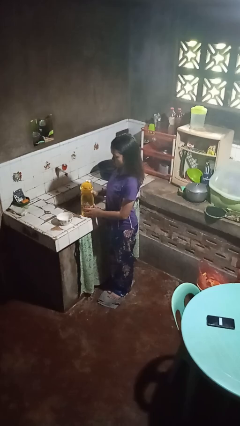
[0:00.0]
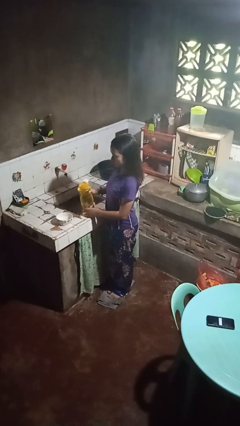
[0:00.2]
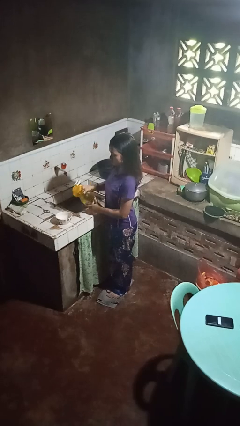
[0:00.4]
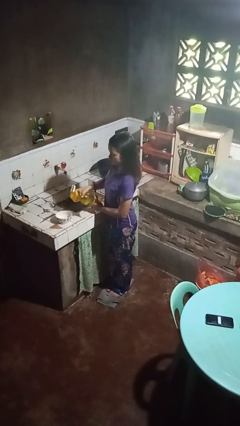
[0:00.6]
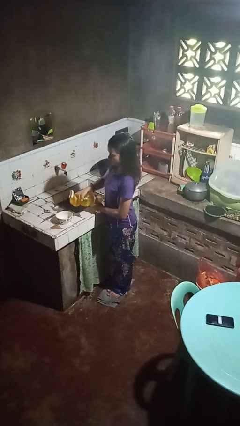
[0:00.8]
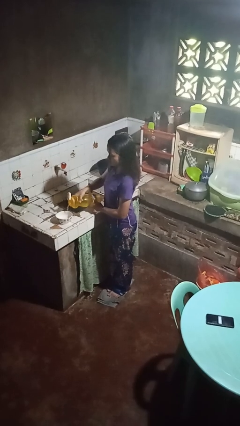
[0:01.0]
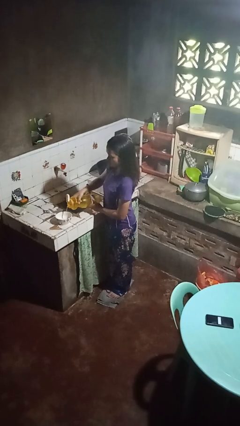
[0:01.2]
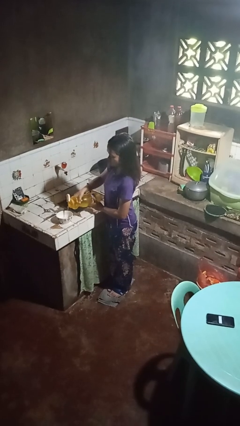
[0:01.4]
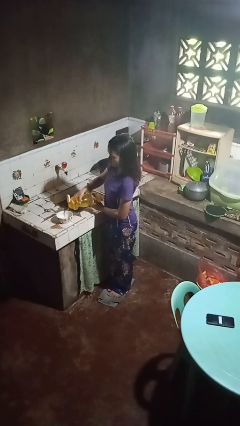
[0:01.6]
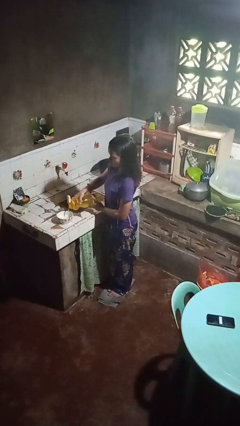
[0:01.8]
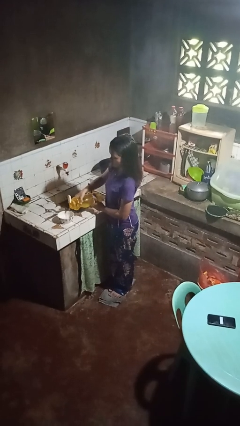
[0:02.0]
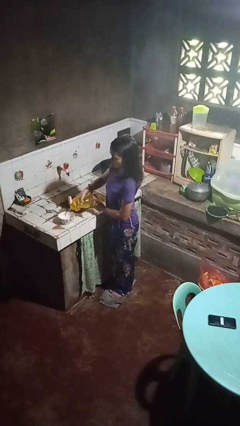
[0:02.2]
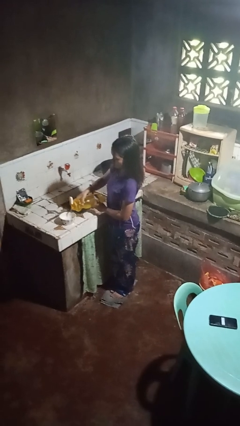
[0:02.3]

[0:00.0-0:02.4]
person pours into bowl

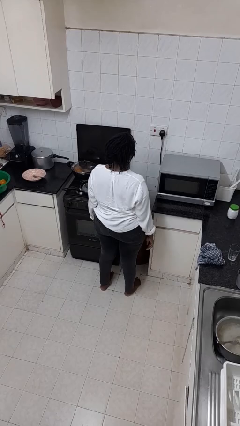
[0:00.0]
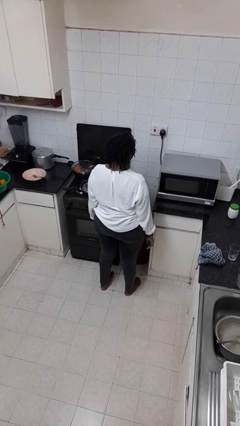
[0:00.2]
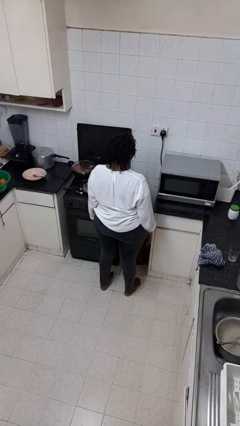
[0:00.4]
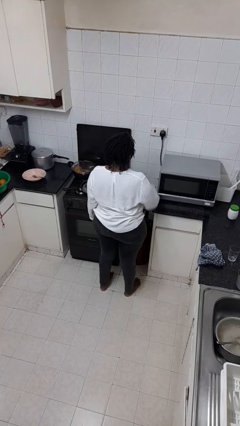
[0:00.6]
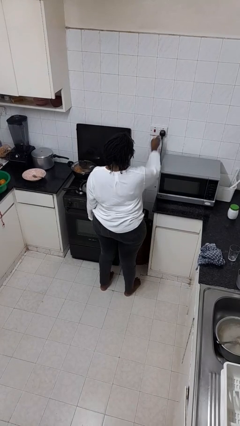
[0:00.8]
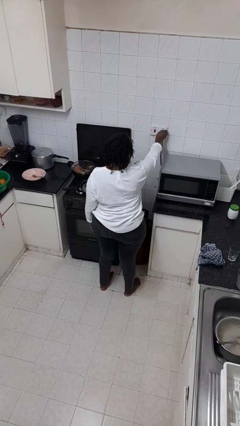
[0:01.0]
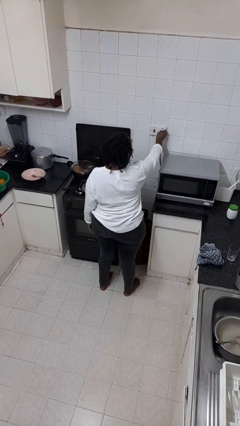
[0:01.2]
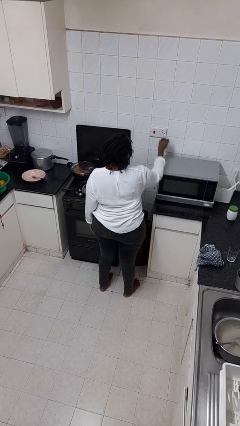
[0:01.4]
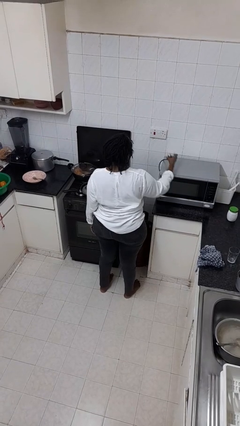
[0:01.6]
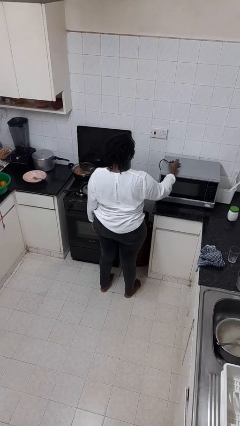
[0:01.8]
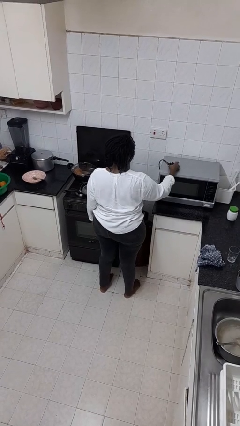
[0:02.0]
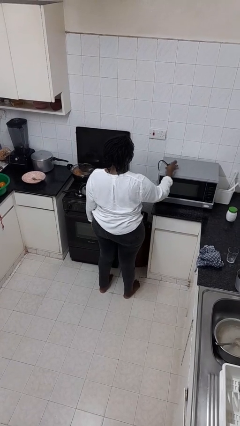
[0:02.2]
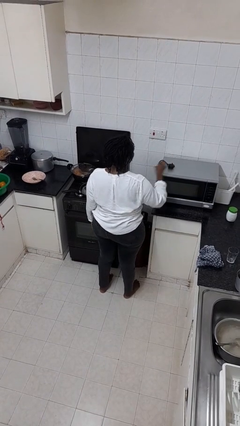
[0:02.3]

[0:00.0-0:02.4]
person unplugs from electrical socket

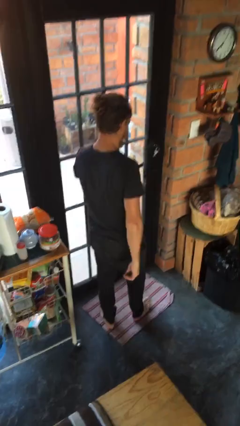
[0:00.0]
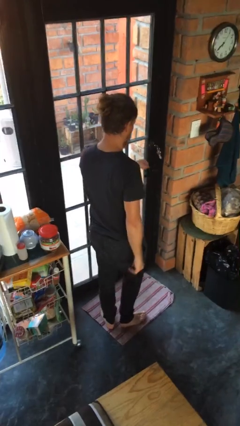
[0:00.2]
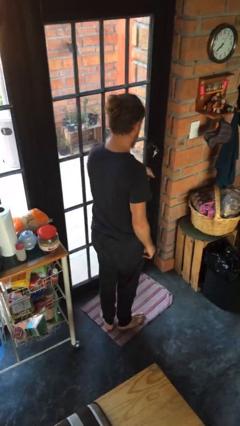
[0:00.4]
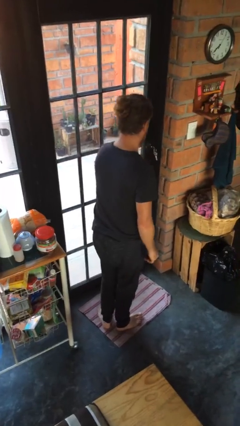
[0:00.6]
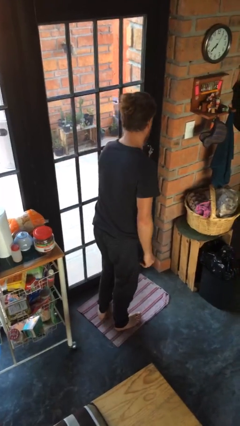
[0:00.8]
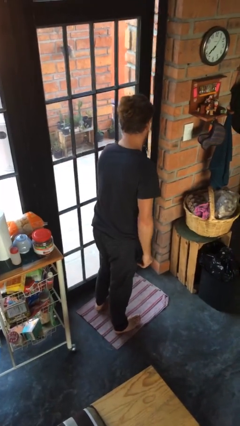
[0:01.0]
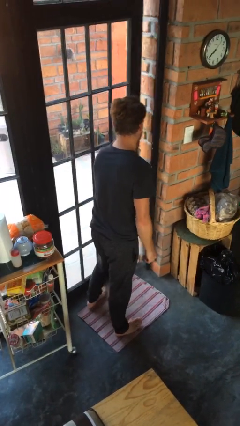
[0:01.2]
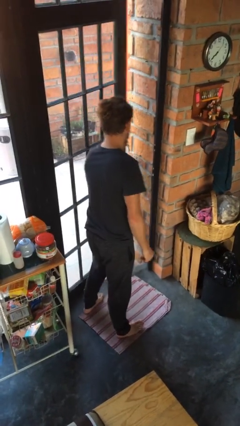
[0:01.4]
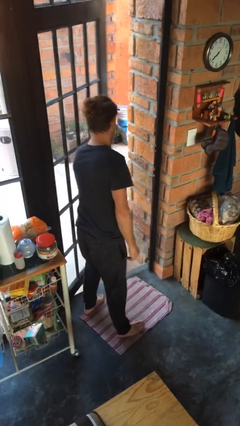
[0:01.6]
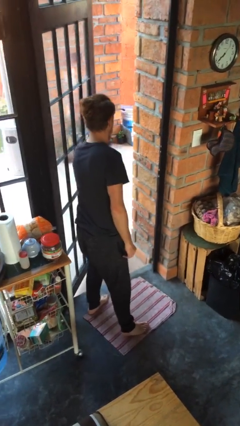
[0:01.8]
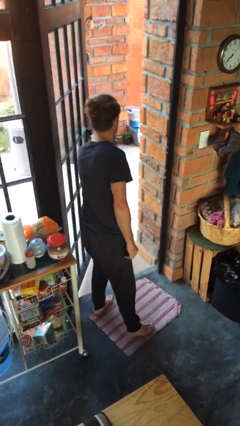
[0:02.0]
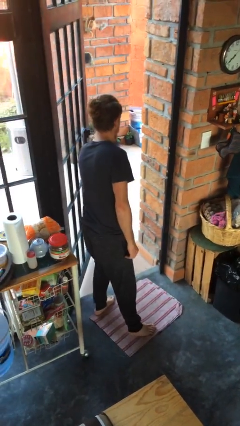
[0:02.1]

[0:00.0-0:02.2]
person opens facility door

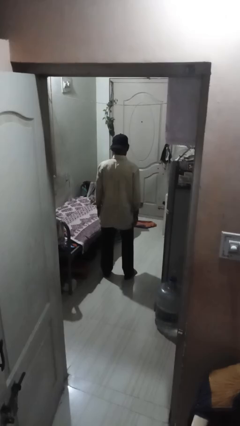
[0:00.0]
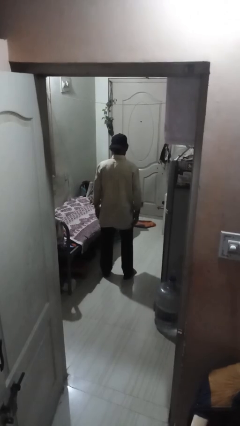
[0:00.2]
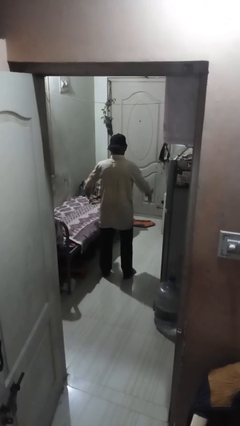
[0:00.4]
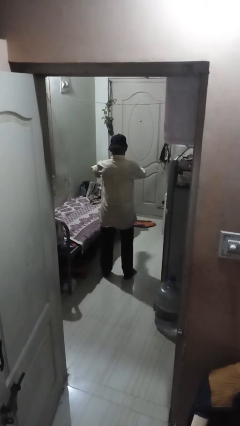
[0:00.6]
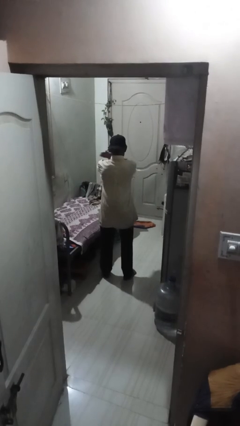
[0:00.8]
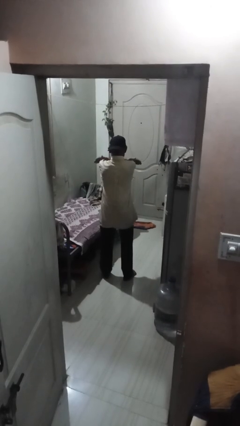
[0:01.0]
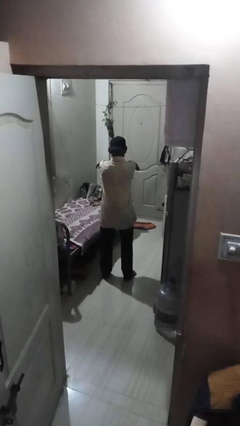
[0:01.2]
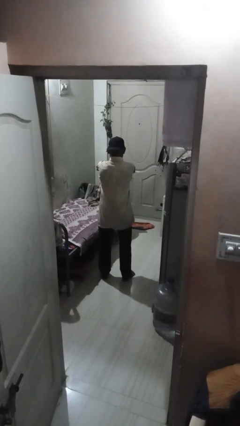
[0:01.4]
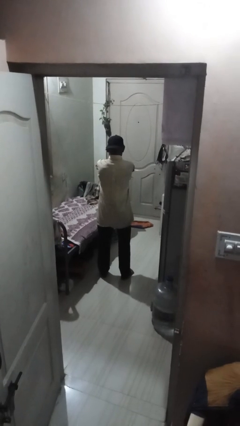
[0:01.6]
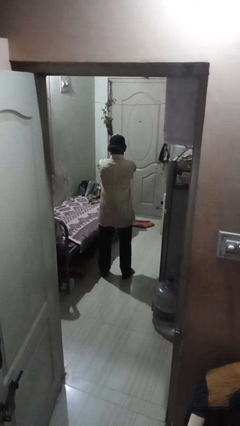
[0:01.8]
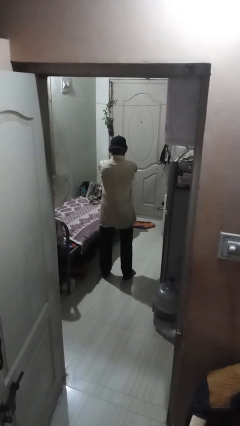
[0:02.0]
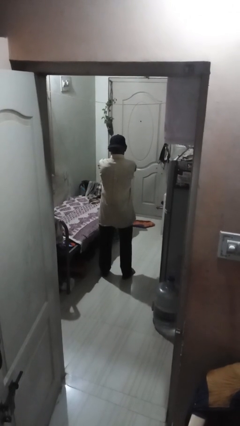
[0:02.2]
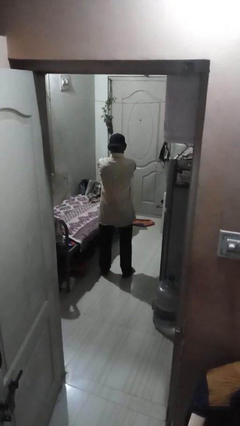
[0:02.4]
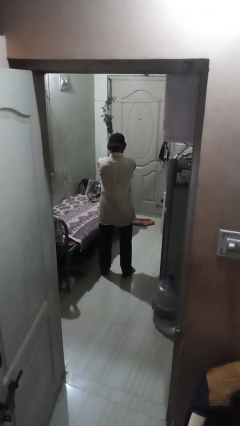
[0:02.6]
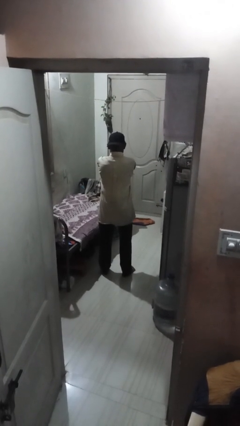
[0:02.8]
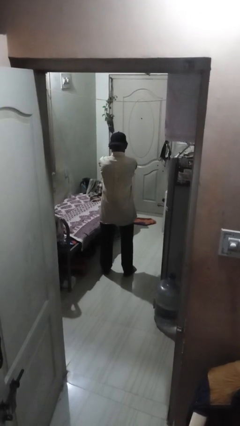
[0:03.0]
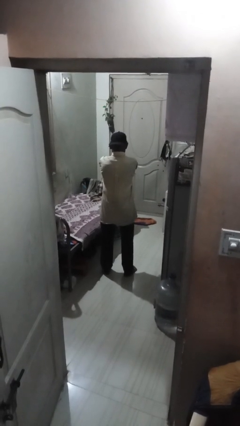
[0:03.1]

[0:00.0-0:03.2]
person crosses arms

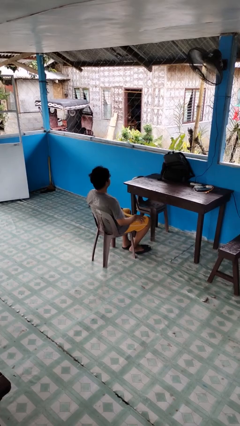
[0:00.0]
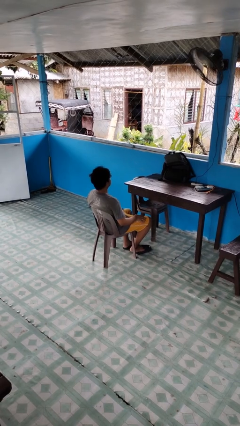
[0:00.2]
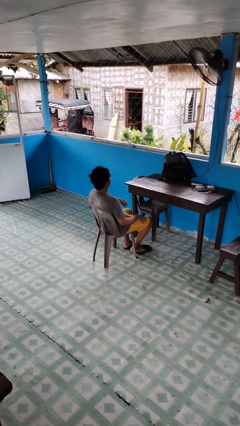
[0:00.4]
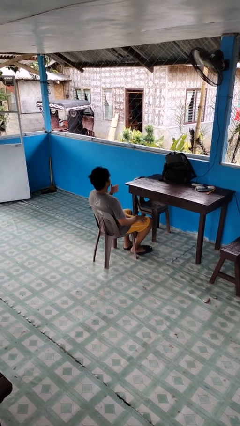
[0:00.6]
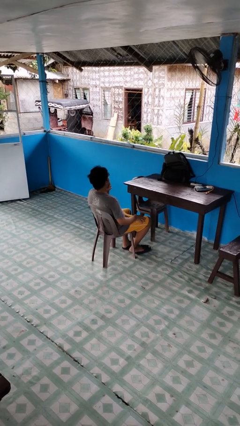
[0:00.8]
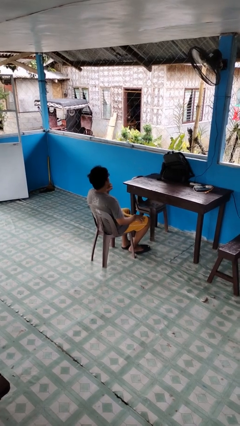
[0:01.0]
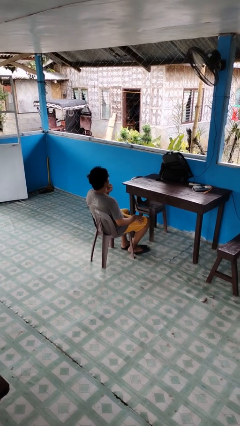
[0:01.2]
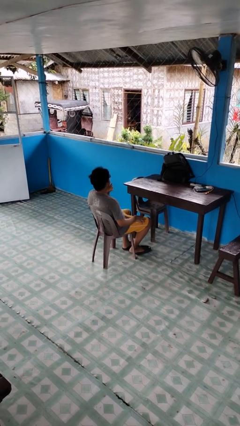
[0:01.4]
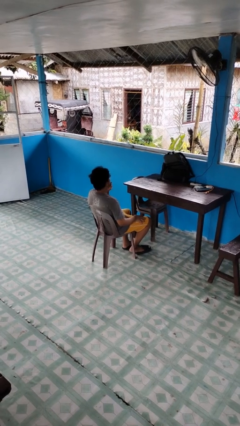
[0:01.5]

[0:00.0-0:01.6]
person strokes chin

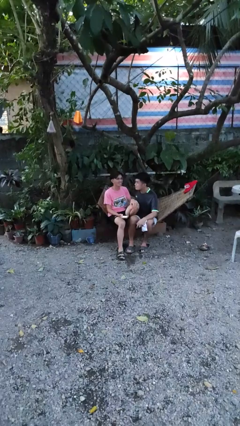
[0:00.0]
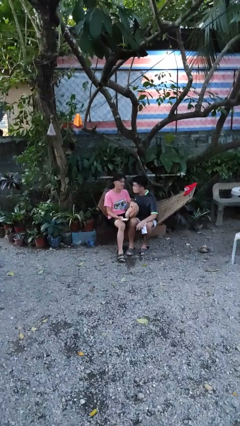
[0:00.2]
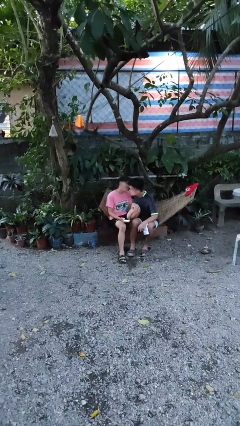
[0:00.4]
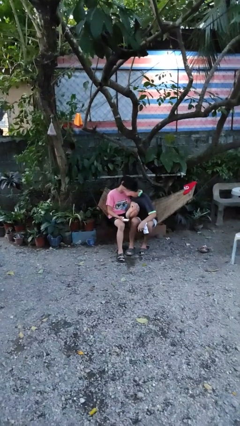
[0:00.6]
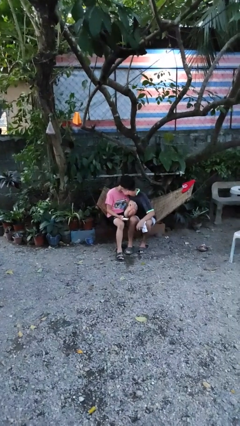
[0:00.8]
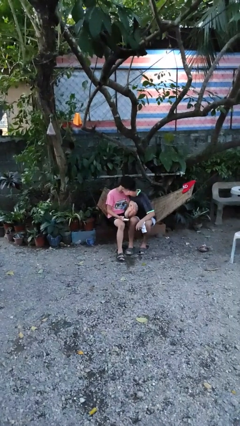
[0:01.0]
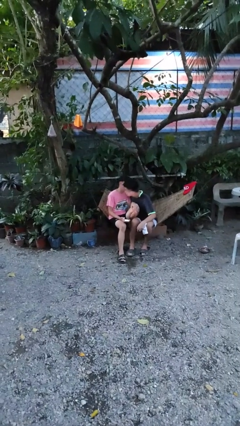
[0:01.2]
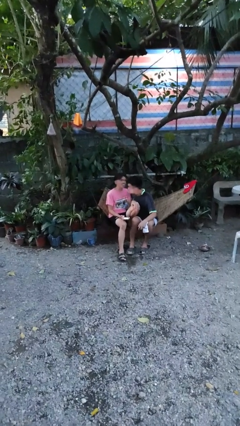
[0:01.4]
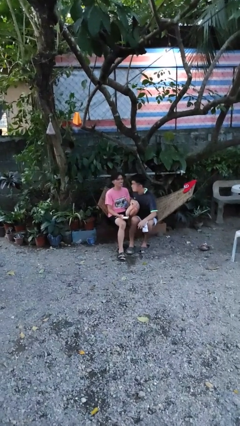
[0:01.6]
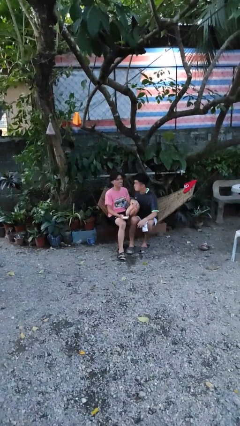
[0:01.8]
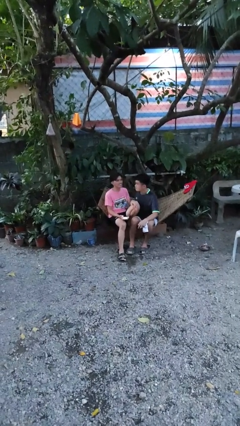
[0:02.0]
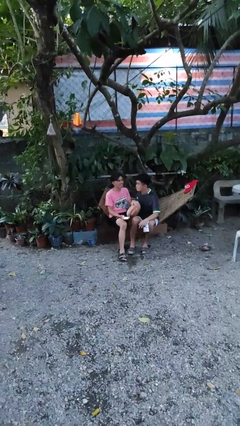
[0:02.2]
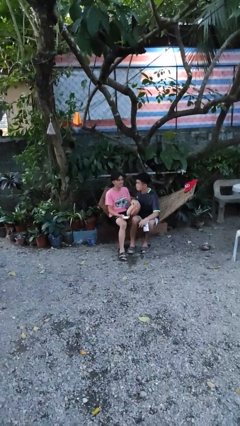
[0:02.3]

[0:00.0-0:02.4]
person kisses cheek of person

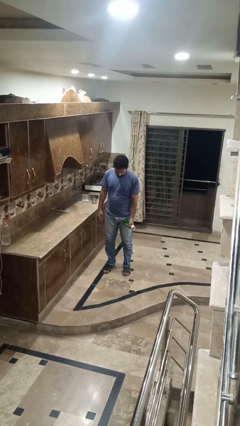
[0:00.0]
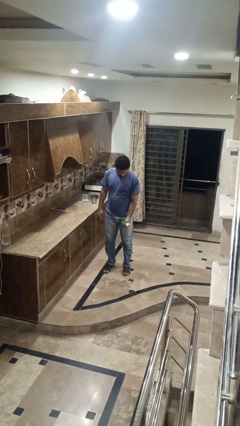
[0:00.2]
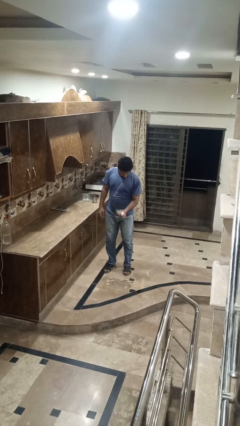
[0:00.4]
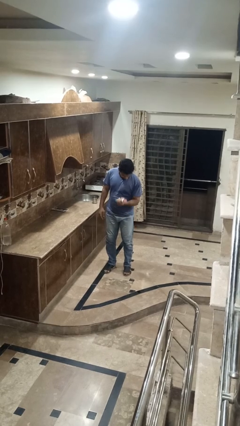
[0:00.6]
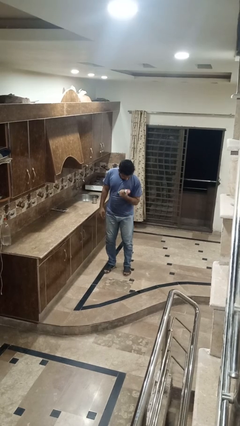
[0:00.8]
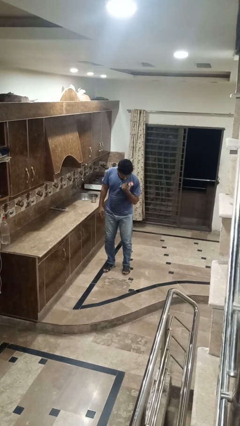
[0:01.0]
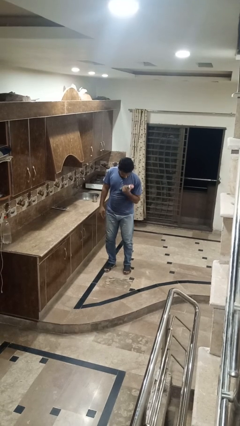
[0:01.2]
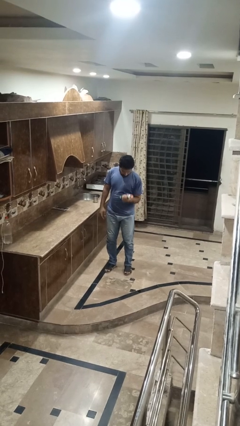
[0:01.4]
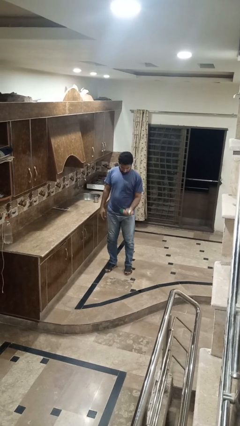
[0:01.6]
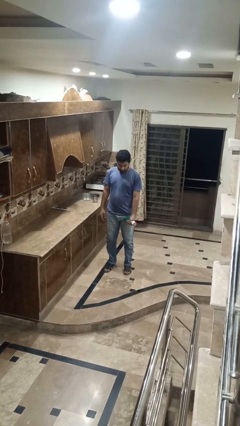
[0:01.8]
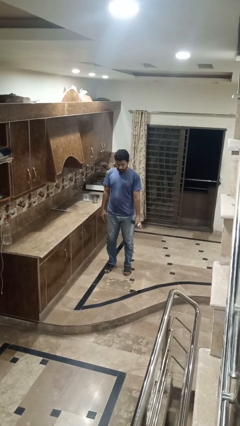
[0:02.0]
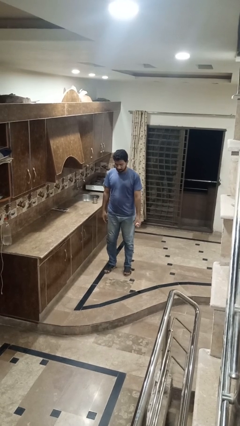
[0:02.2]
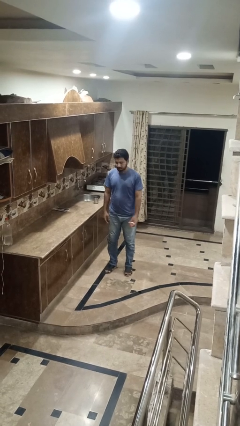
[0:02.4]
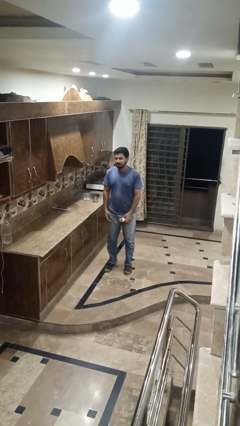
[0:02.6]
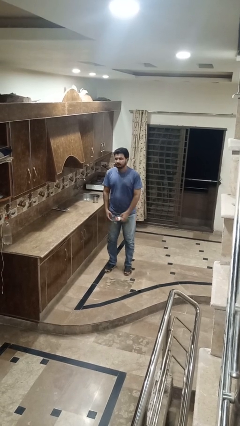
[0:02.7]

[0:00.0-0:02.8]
person lifts dumbbells
